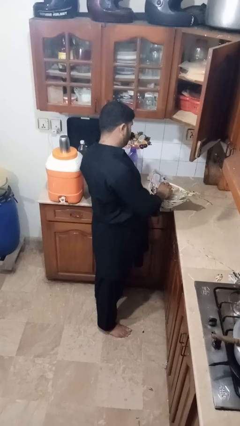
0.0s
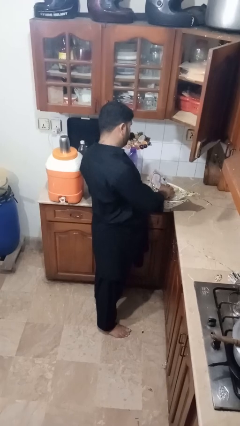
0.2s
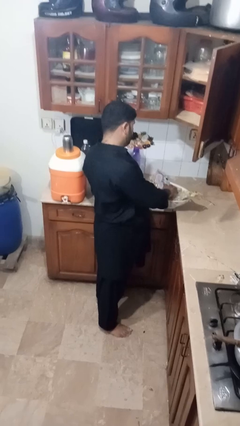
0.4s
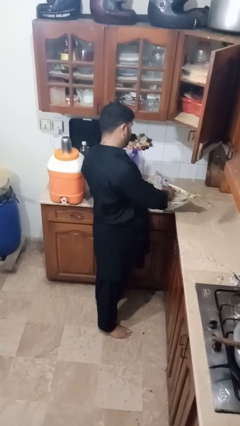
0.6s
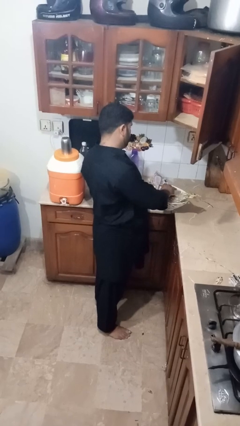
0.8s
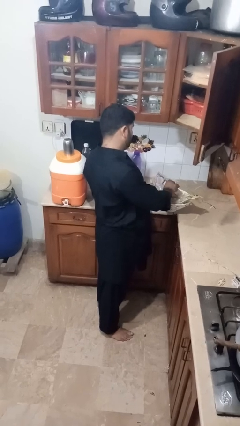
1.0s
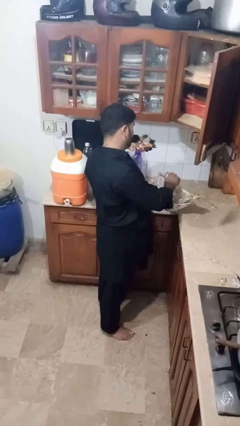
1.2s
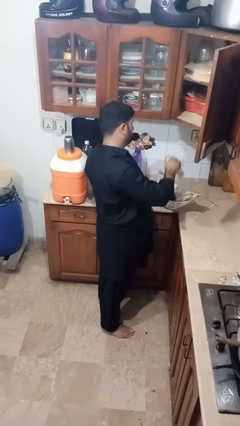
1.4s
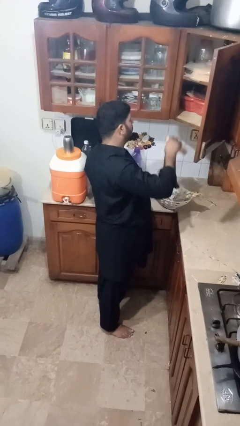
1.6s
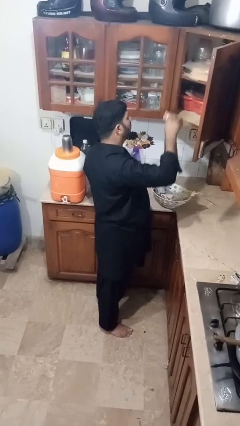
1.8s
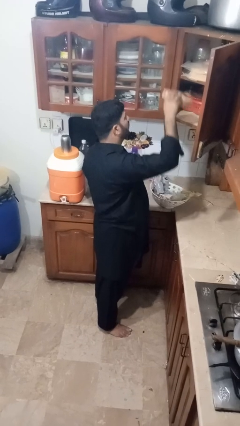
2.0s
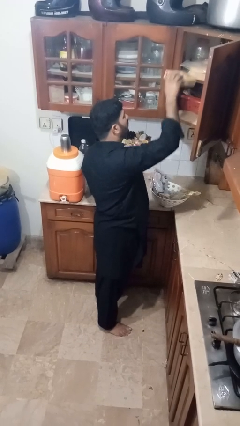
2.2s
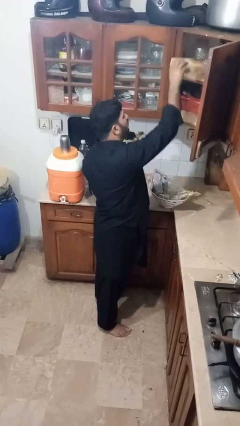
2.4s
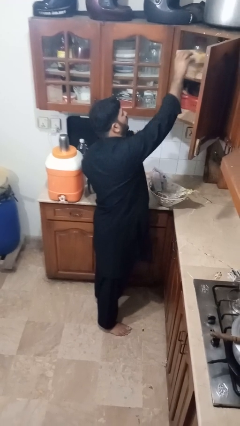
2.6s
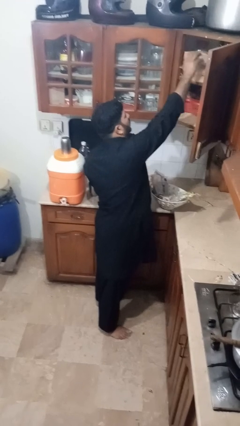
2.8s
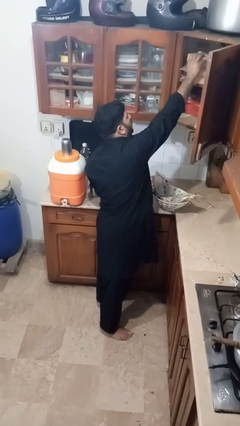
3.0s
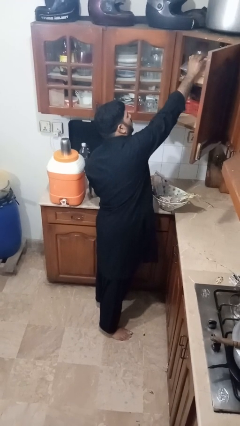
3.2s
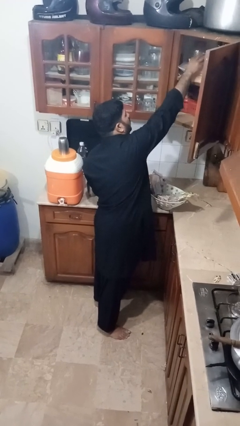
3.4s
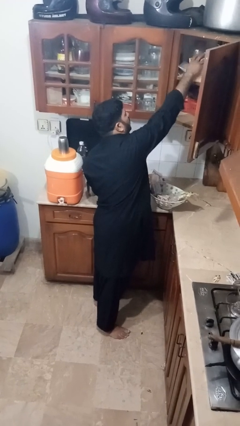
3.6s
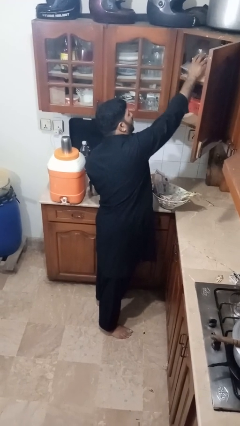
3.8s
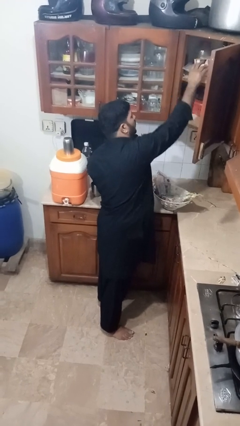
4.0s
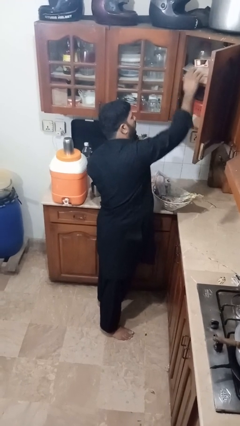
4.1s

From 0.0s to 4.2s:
person loads groceries into cabinet

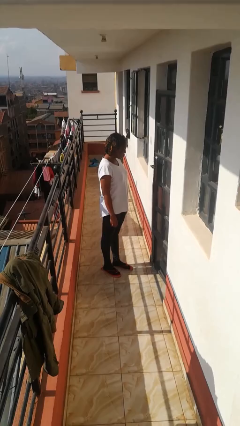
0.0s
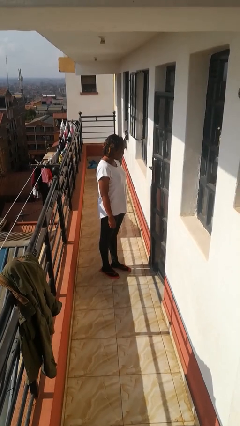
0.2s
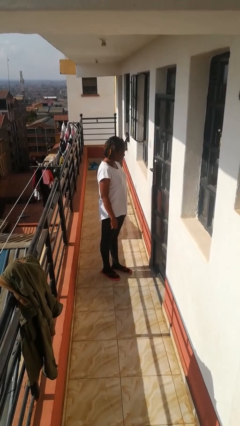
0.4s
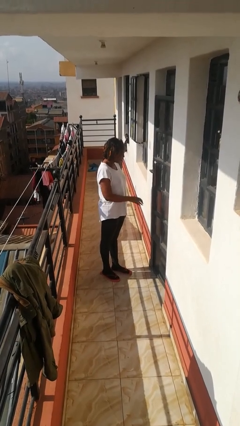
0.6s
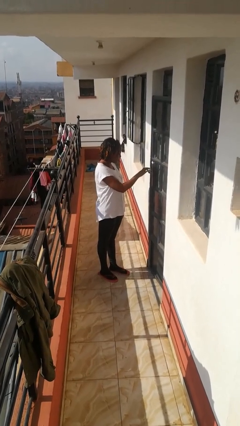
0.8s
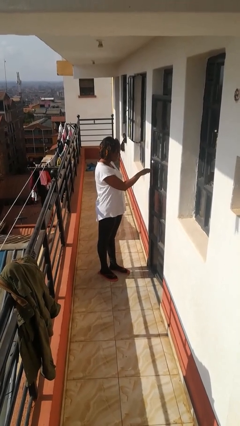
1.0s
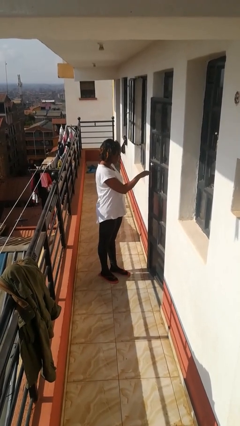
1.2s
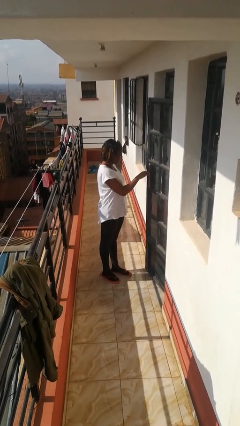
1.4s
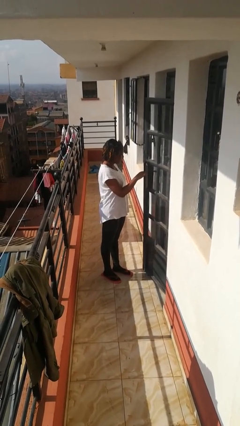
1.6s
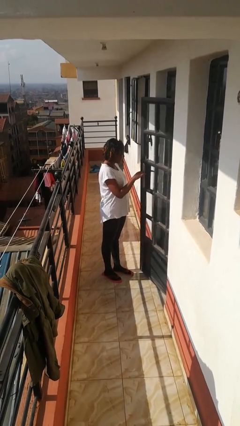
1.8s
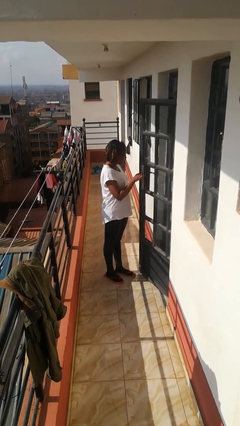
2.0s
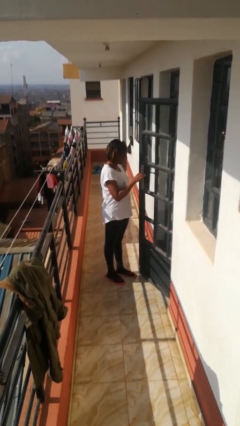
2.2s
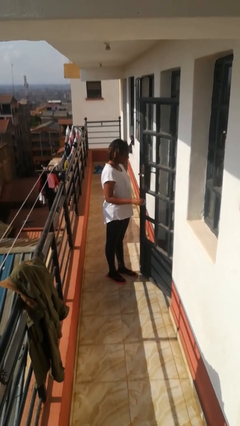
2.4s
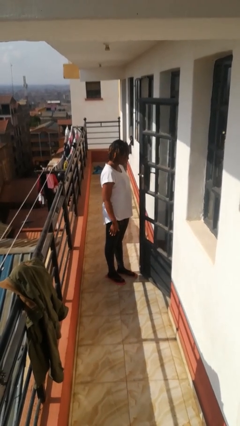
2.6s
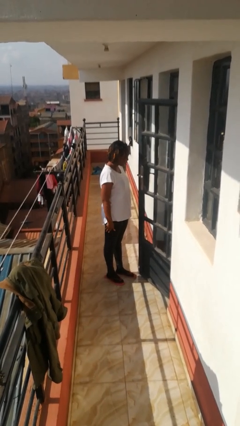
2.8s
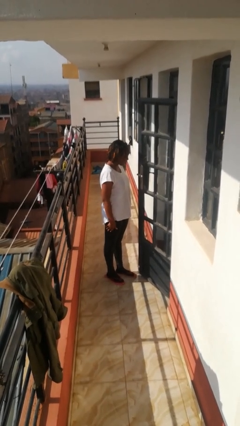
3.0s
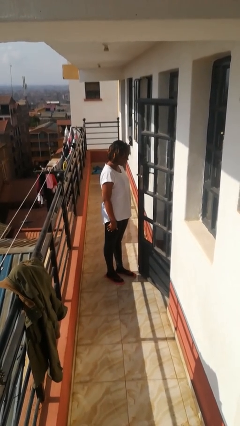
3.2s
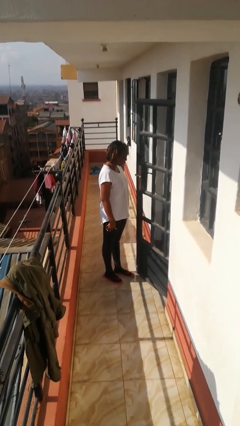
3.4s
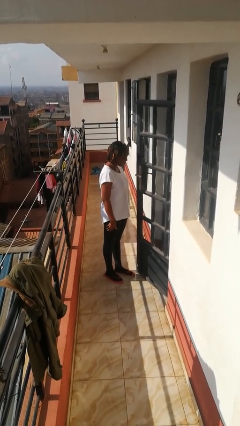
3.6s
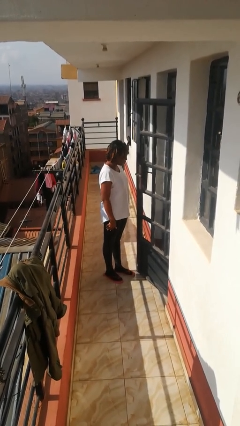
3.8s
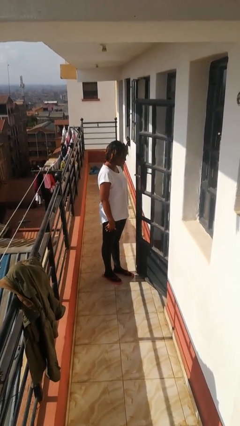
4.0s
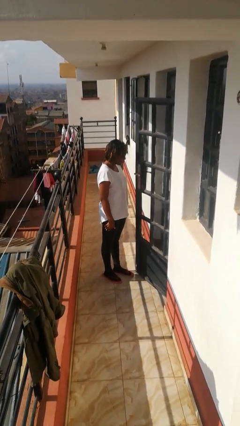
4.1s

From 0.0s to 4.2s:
person opens facility door

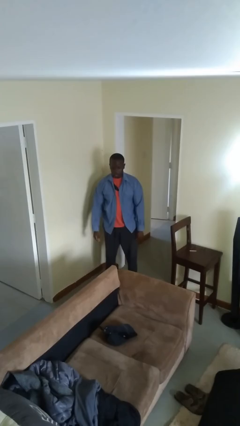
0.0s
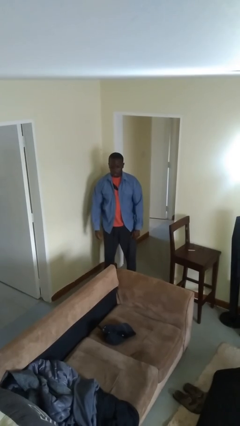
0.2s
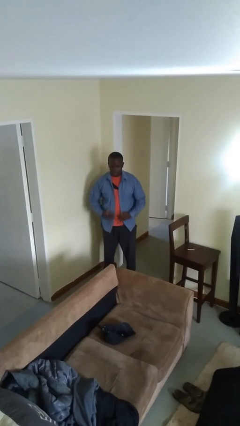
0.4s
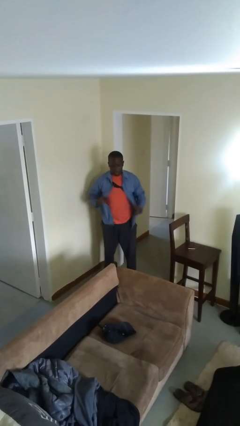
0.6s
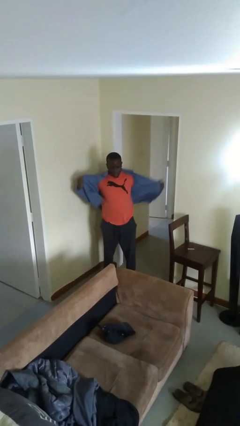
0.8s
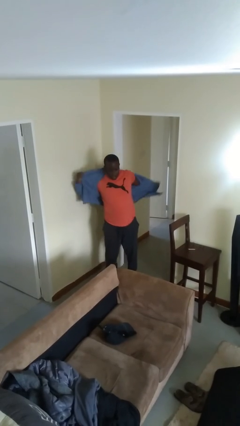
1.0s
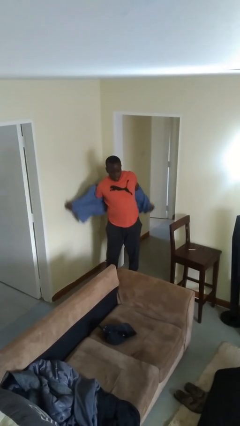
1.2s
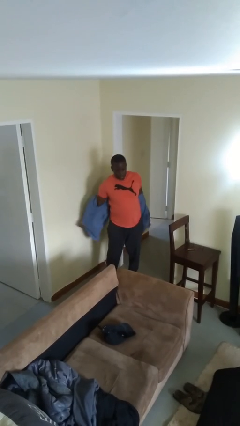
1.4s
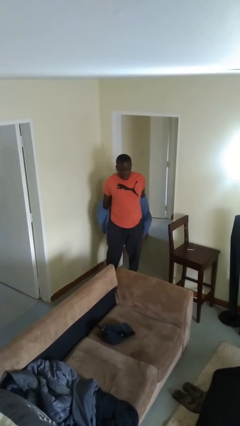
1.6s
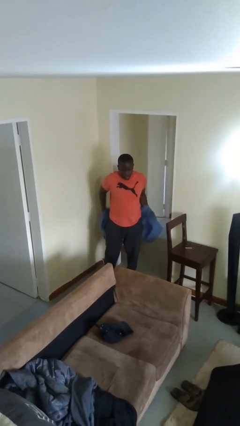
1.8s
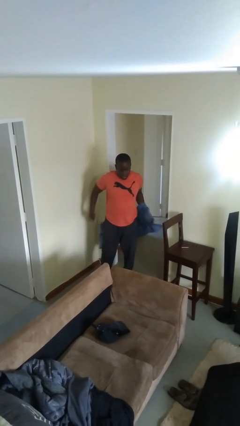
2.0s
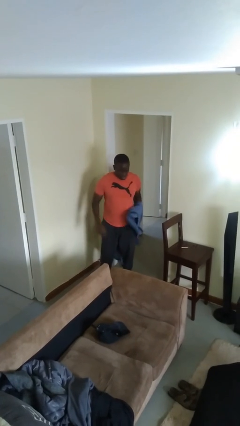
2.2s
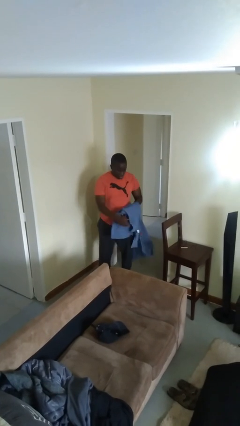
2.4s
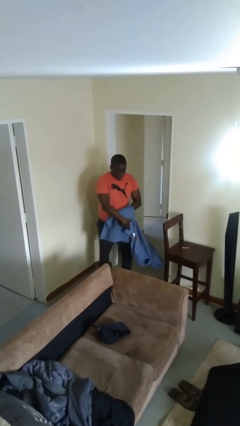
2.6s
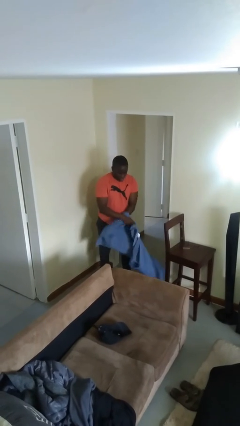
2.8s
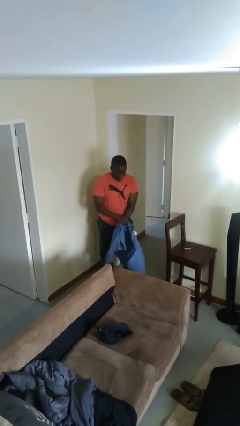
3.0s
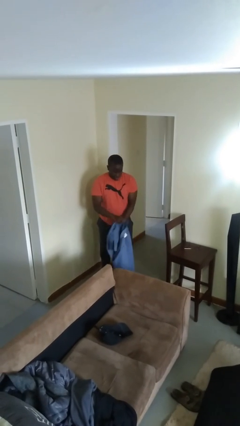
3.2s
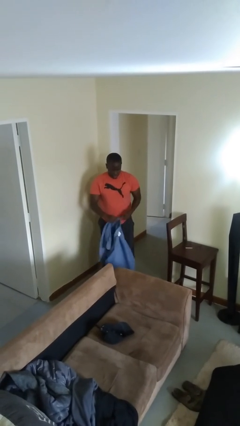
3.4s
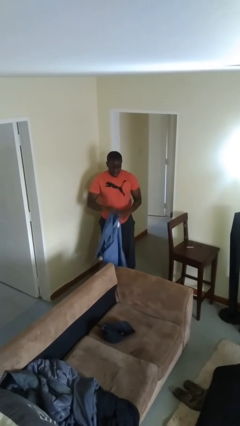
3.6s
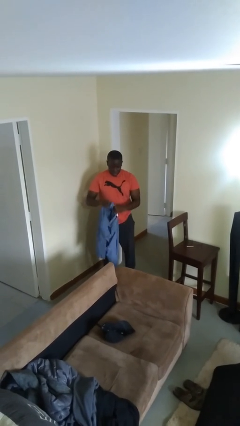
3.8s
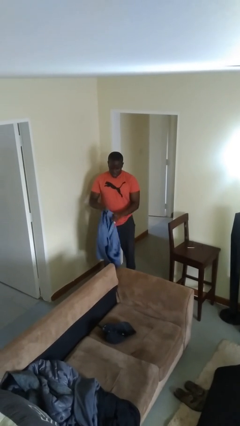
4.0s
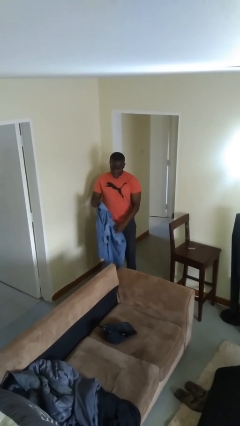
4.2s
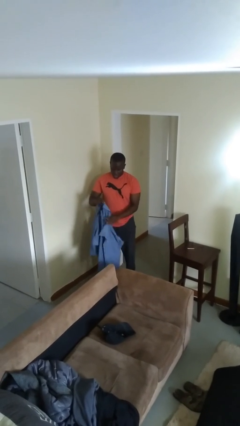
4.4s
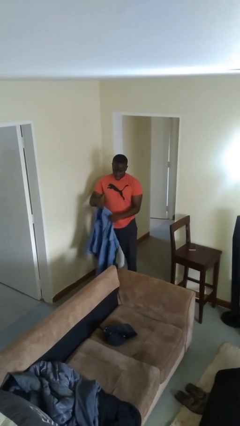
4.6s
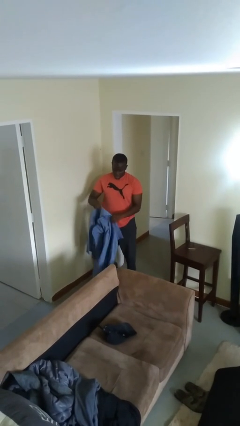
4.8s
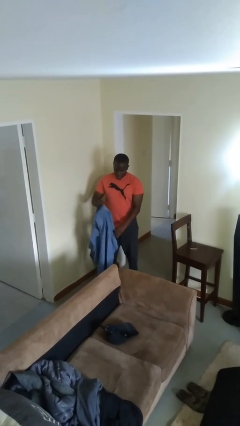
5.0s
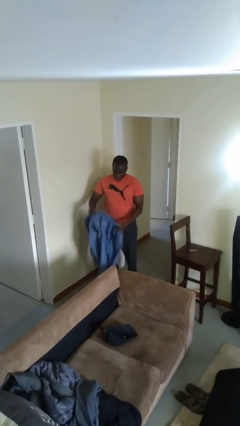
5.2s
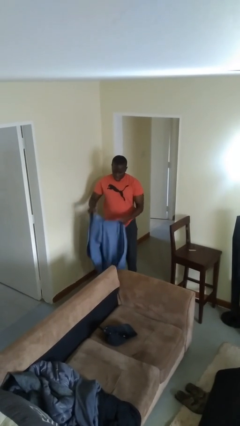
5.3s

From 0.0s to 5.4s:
person takes off shirt

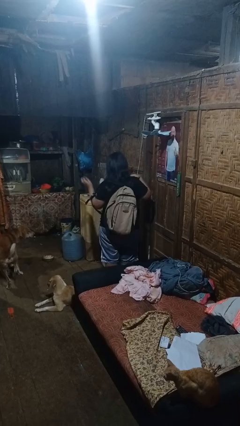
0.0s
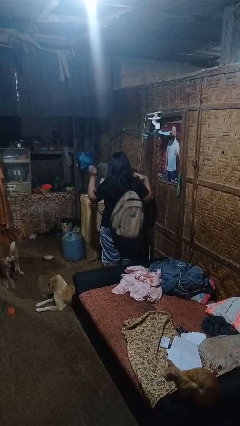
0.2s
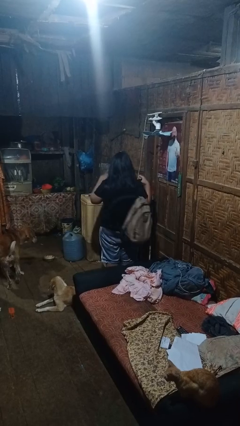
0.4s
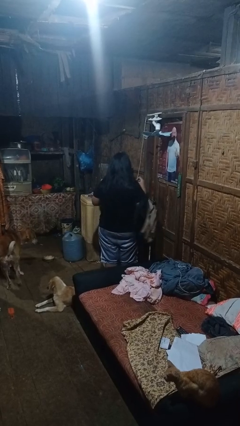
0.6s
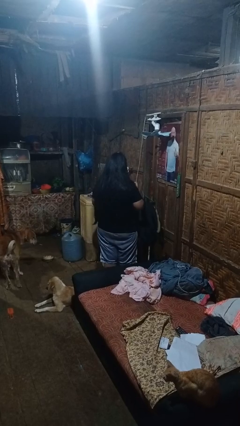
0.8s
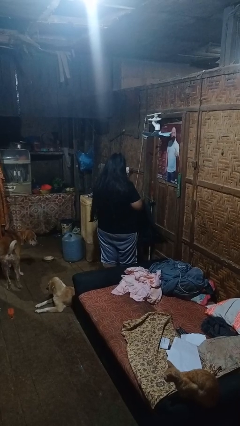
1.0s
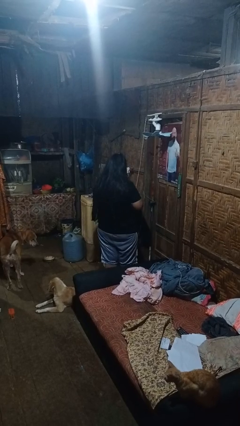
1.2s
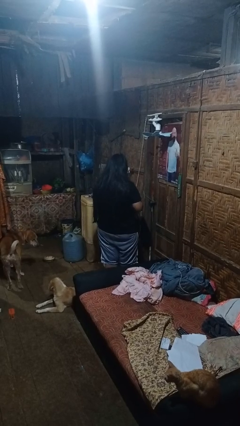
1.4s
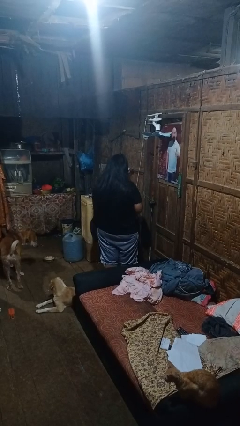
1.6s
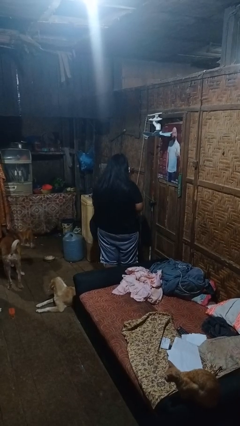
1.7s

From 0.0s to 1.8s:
person takes off backpack

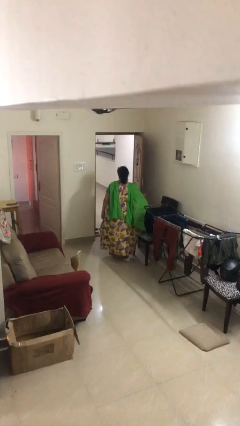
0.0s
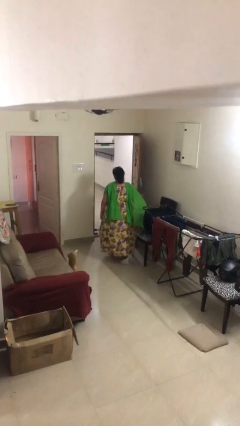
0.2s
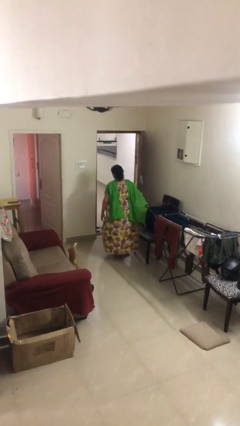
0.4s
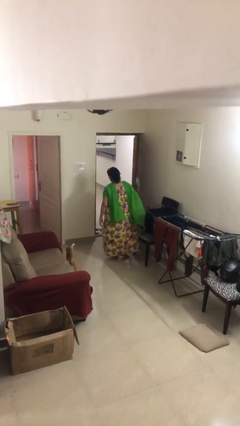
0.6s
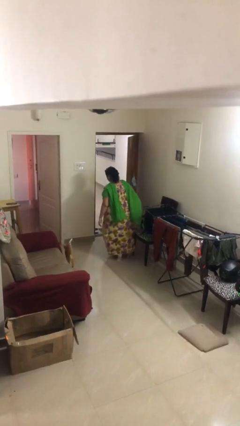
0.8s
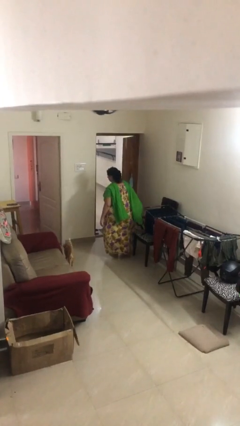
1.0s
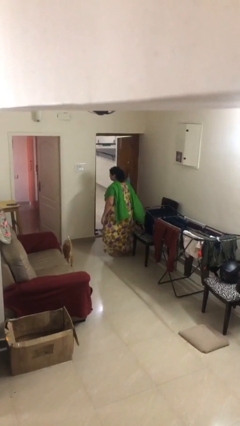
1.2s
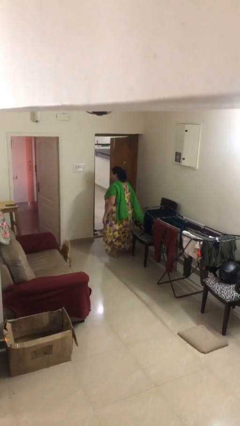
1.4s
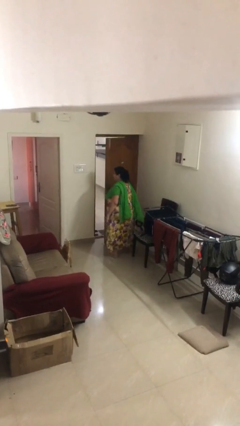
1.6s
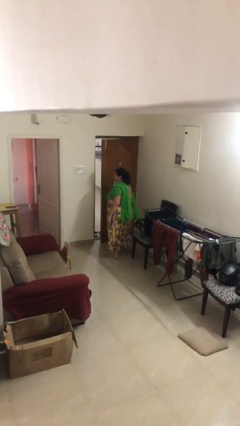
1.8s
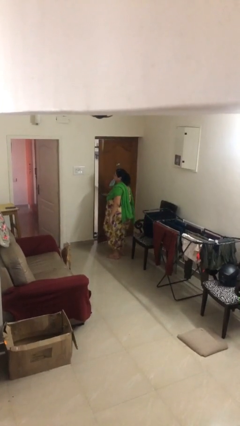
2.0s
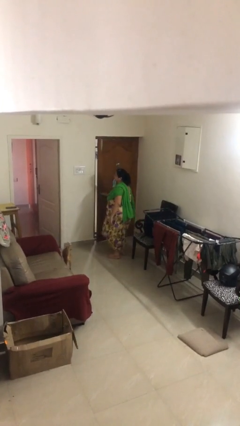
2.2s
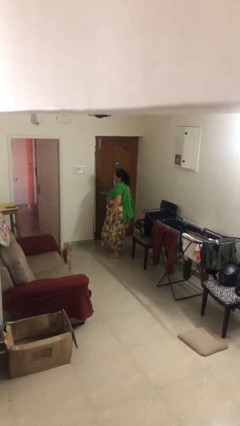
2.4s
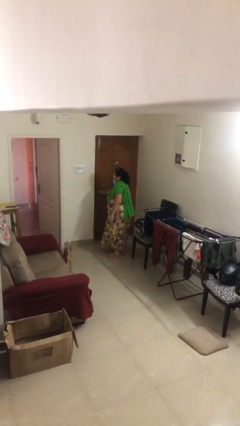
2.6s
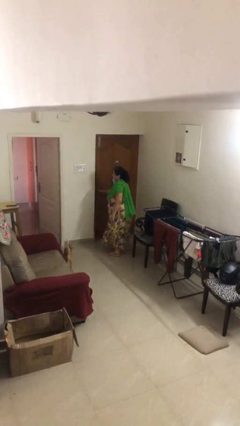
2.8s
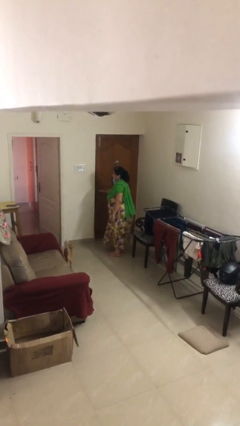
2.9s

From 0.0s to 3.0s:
person closes facility door
